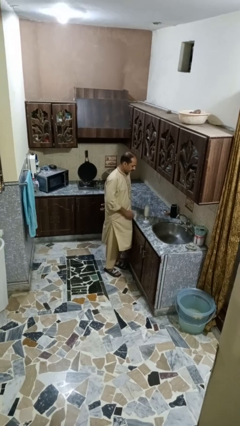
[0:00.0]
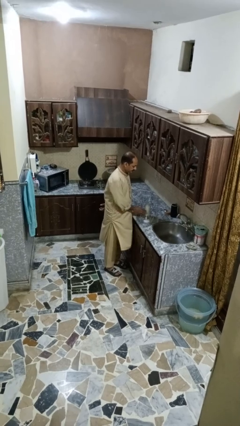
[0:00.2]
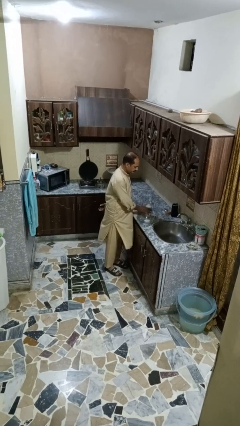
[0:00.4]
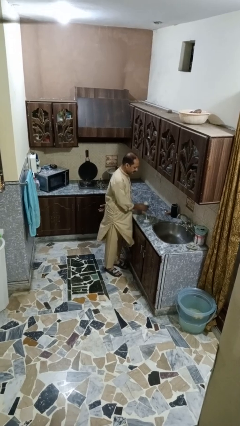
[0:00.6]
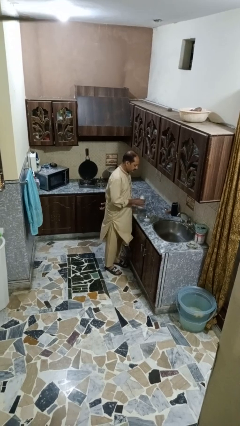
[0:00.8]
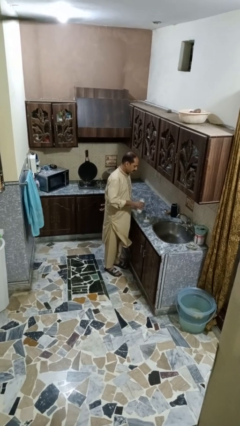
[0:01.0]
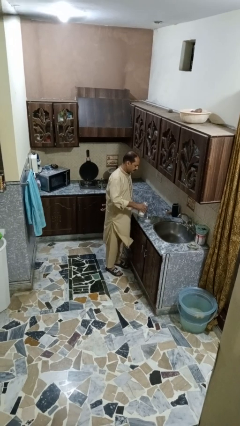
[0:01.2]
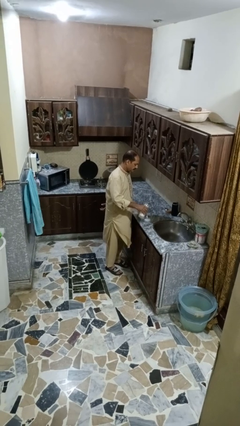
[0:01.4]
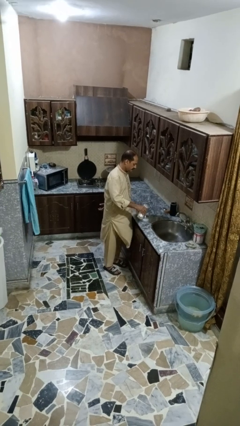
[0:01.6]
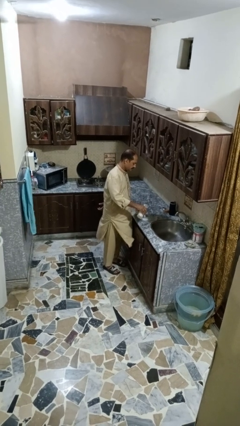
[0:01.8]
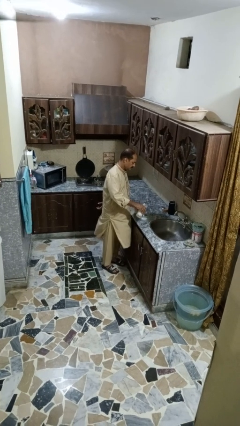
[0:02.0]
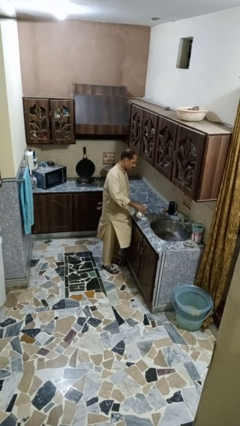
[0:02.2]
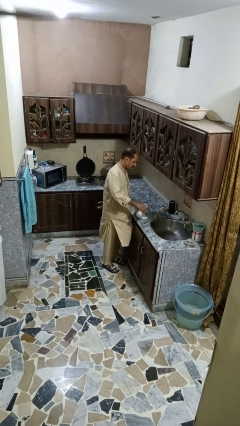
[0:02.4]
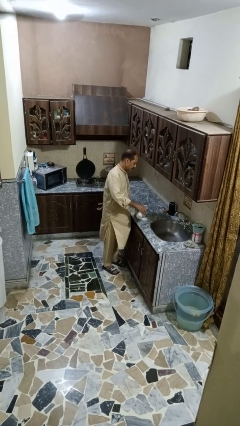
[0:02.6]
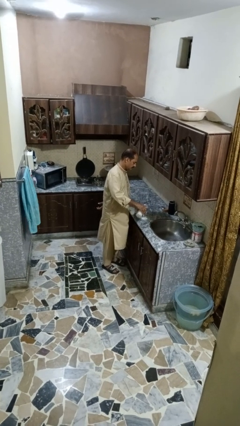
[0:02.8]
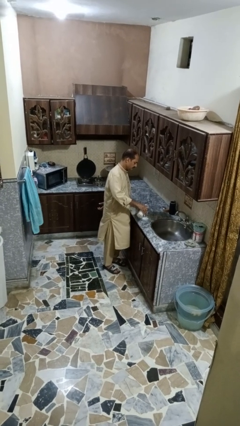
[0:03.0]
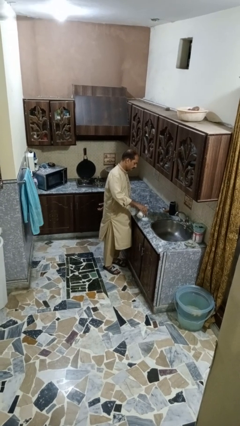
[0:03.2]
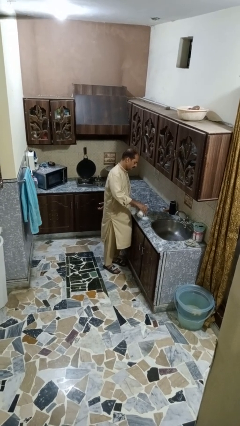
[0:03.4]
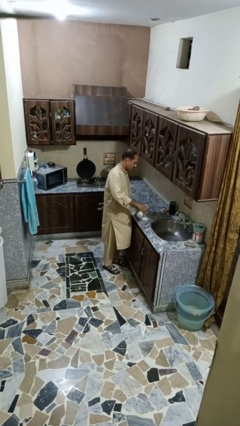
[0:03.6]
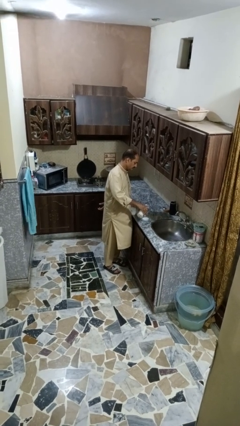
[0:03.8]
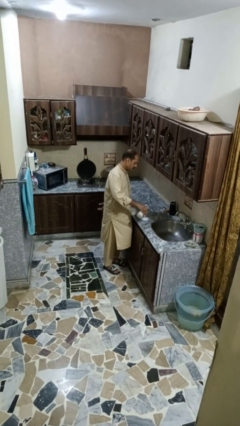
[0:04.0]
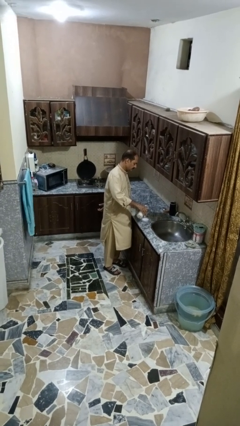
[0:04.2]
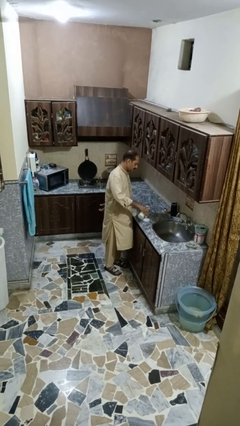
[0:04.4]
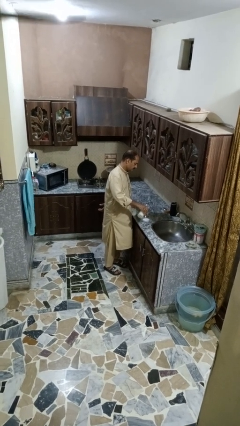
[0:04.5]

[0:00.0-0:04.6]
person pours into bowl

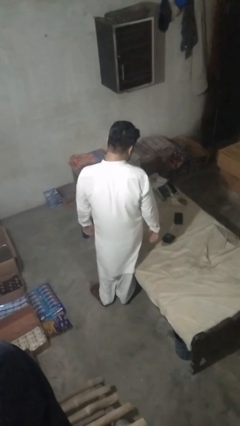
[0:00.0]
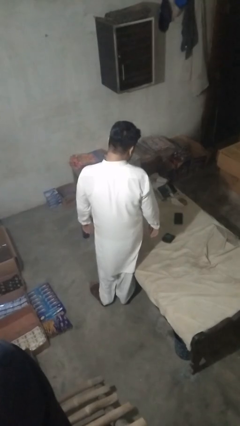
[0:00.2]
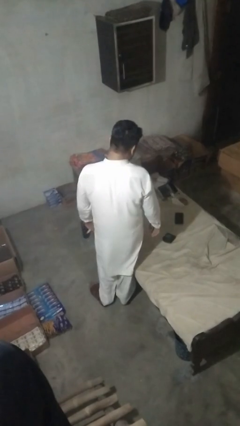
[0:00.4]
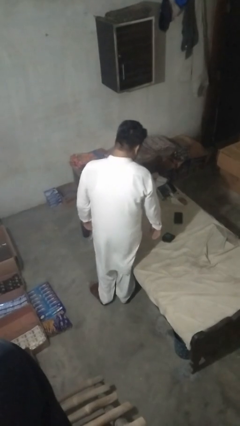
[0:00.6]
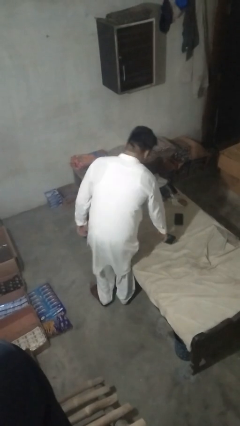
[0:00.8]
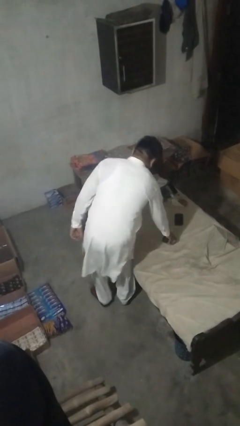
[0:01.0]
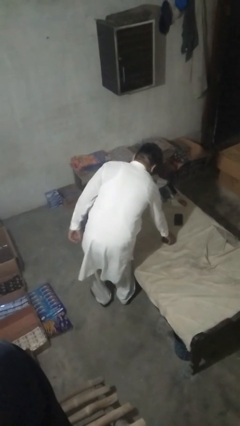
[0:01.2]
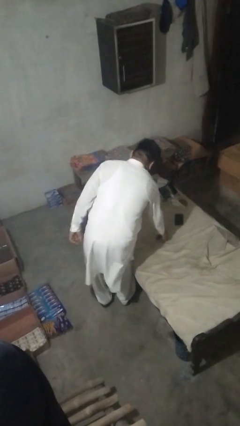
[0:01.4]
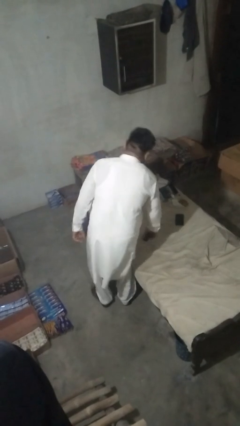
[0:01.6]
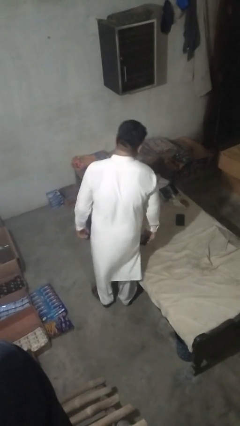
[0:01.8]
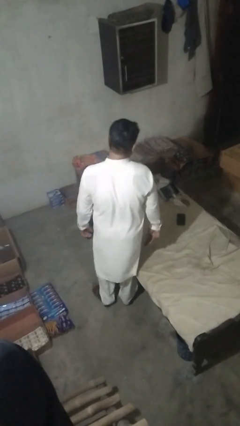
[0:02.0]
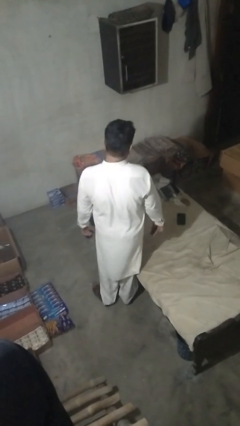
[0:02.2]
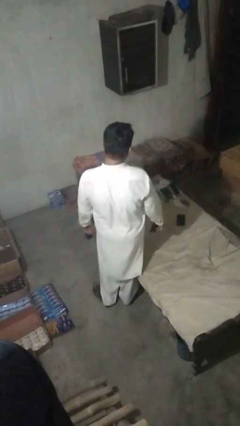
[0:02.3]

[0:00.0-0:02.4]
person picks up object from bed

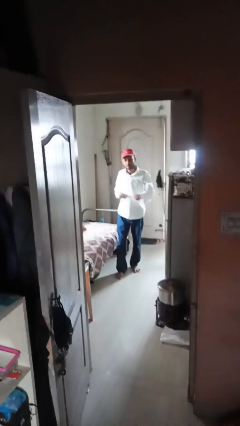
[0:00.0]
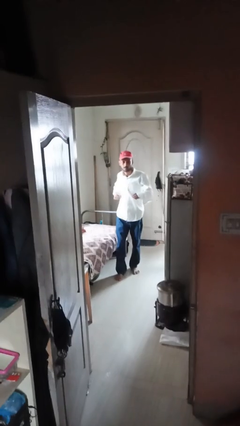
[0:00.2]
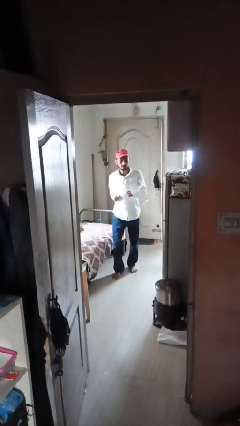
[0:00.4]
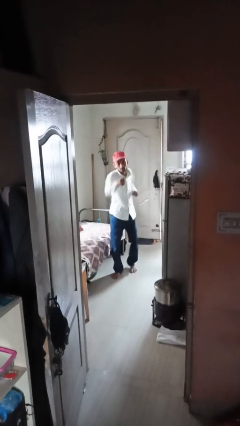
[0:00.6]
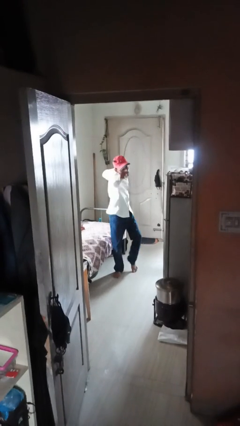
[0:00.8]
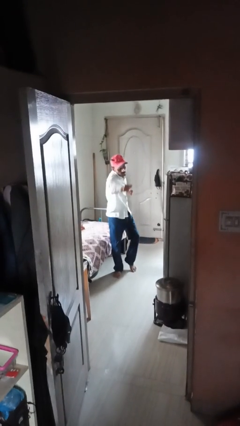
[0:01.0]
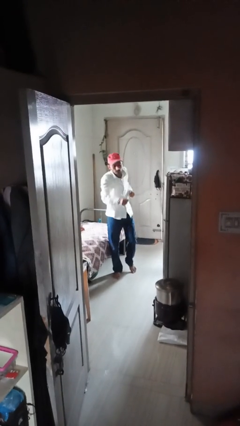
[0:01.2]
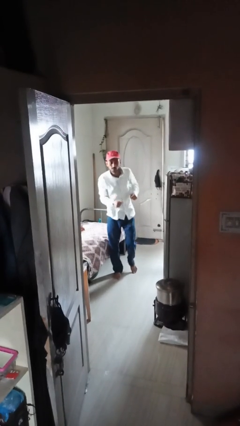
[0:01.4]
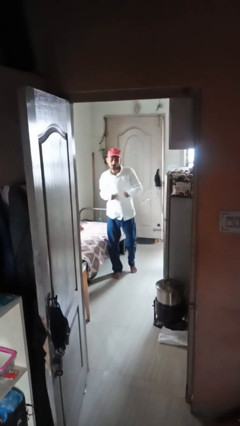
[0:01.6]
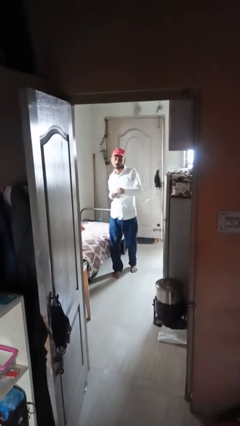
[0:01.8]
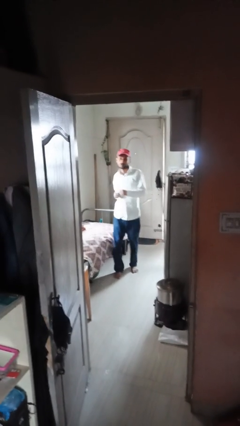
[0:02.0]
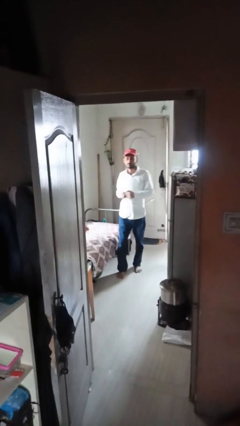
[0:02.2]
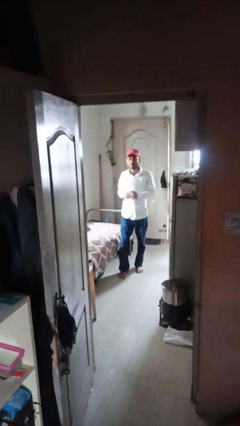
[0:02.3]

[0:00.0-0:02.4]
person punches

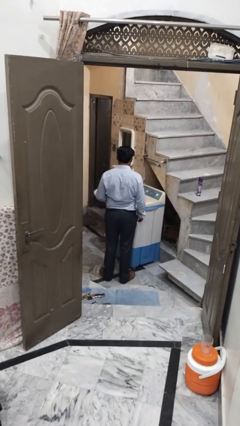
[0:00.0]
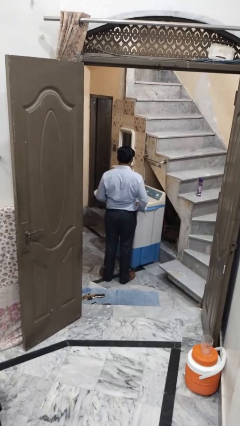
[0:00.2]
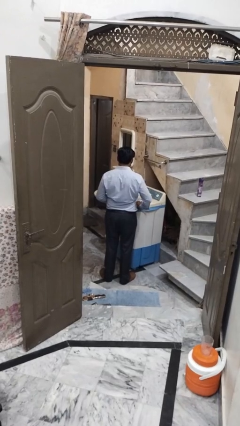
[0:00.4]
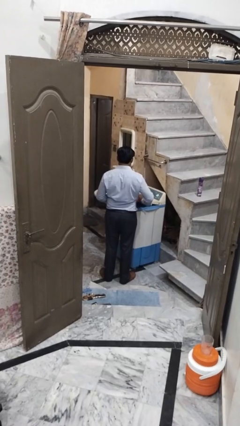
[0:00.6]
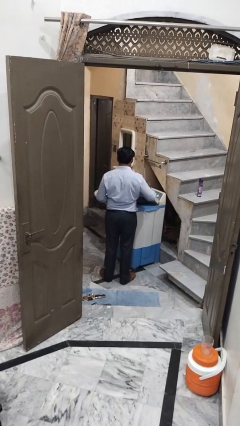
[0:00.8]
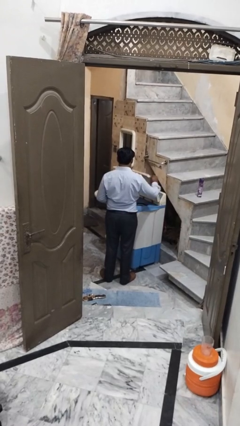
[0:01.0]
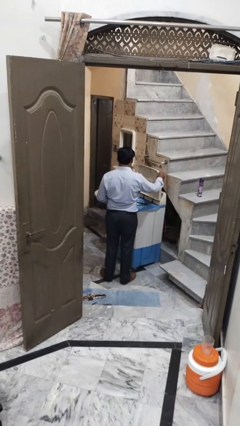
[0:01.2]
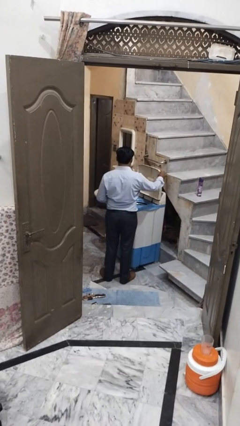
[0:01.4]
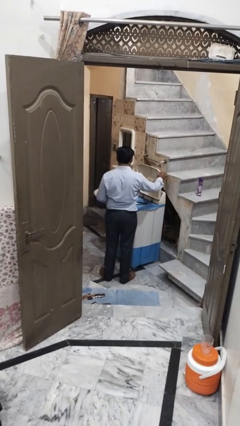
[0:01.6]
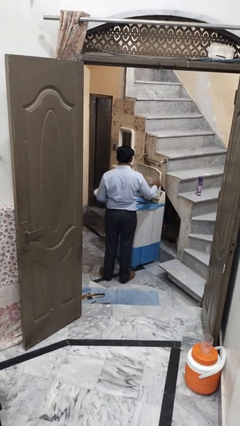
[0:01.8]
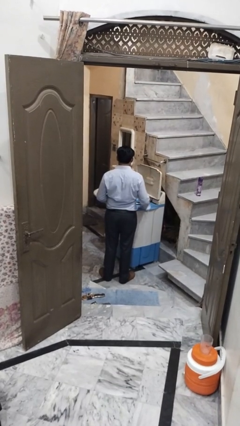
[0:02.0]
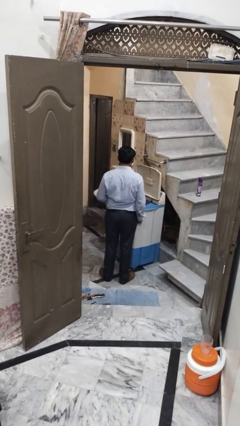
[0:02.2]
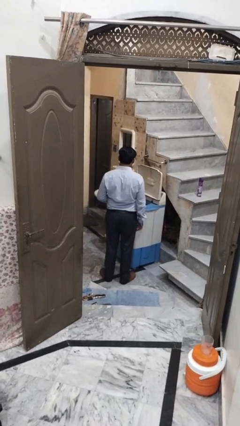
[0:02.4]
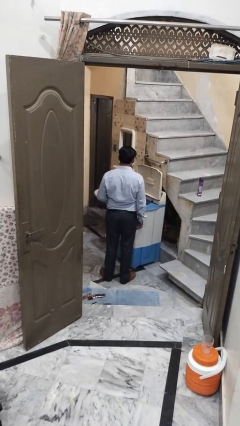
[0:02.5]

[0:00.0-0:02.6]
person opens clothes washer

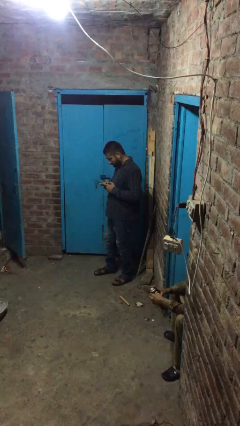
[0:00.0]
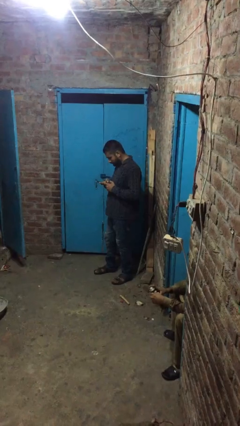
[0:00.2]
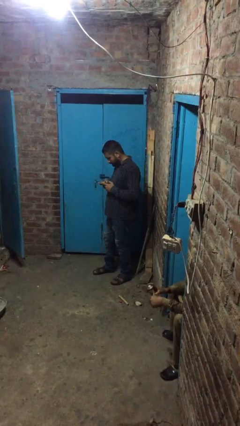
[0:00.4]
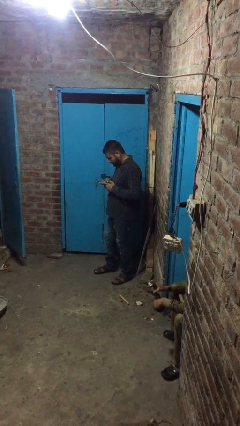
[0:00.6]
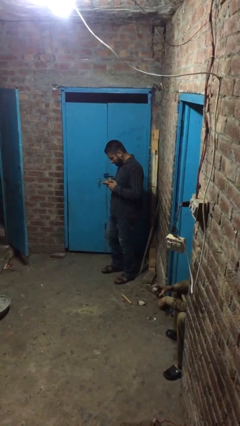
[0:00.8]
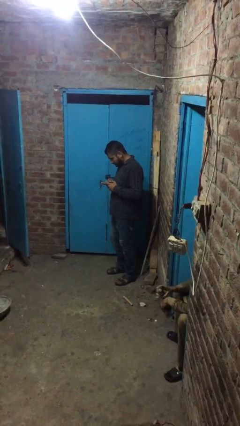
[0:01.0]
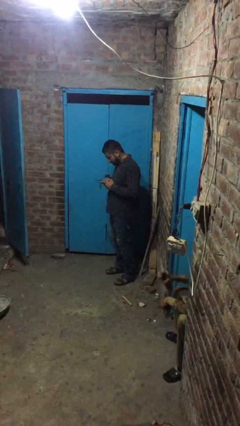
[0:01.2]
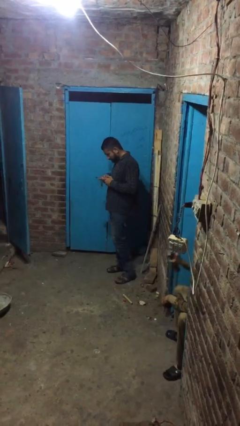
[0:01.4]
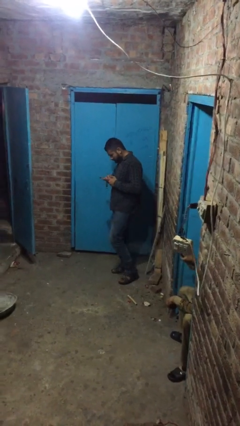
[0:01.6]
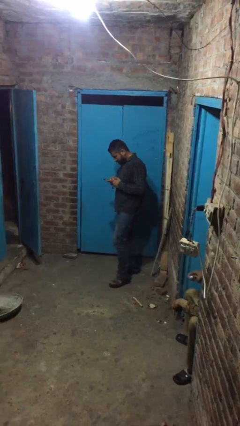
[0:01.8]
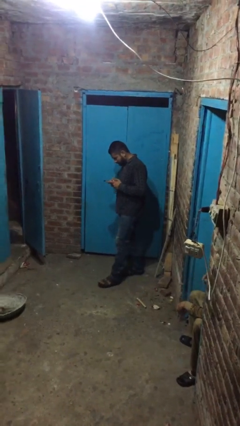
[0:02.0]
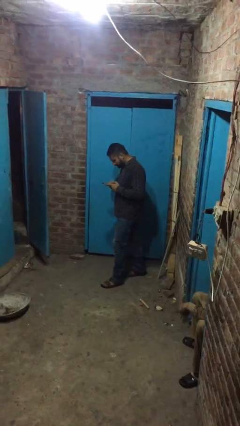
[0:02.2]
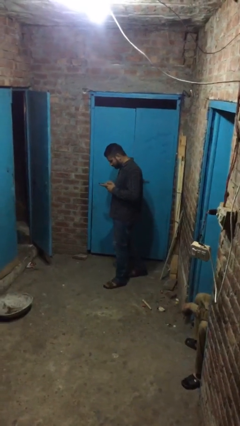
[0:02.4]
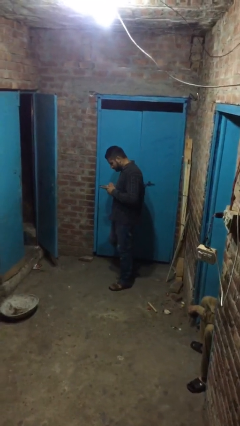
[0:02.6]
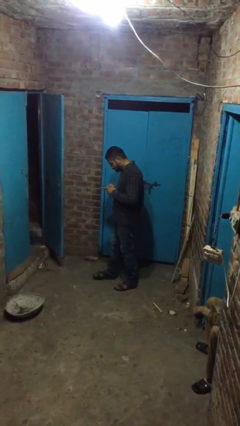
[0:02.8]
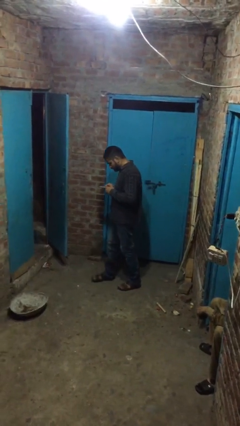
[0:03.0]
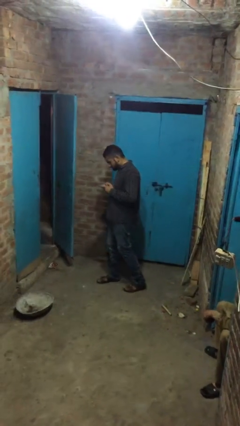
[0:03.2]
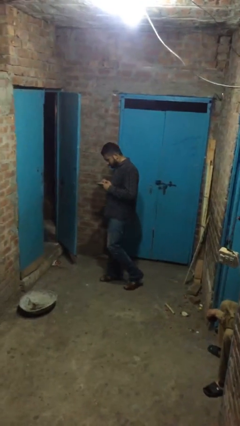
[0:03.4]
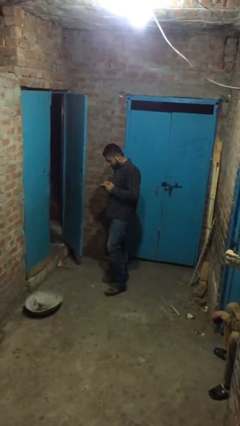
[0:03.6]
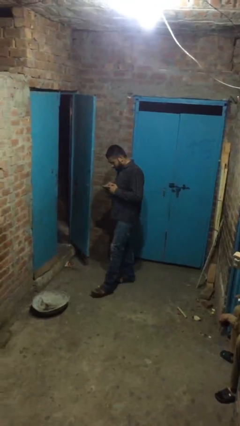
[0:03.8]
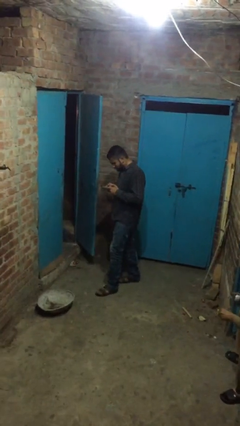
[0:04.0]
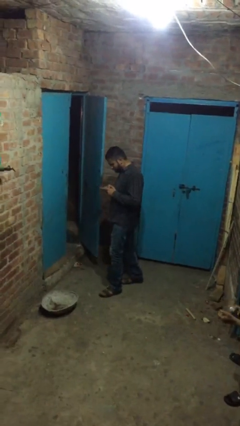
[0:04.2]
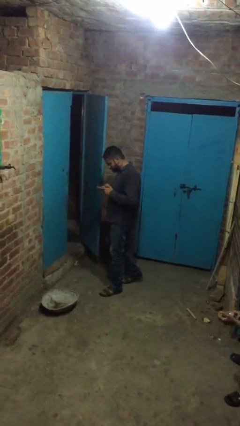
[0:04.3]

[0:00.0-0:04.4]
person texts on phone

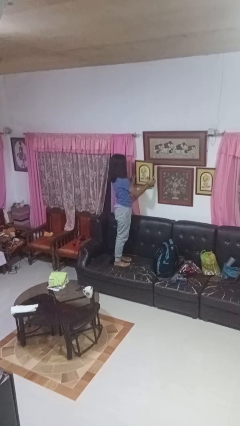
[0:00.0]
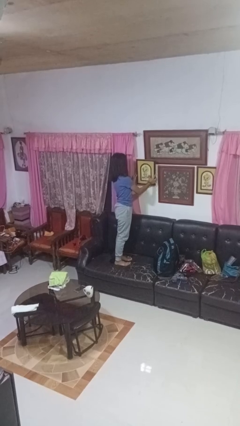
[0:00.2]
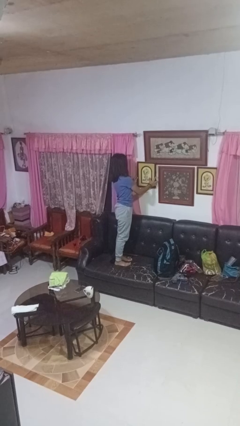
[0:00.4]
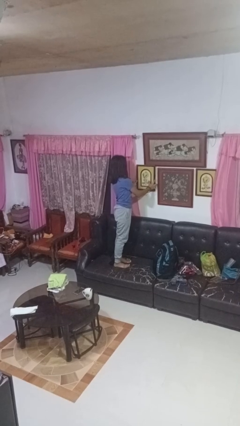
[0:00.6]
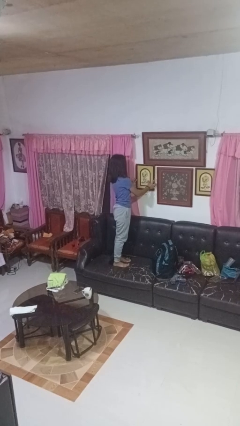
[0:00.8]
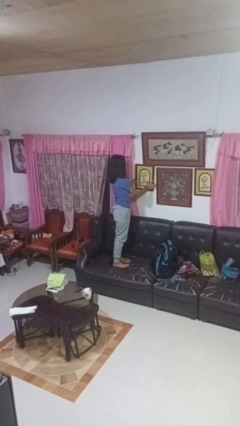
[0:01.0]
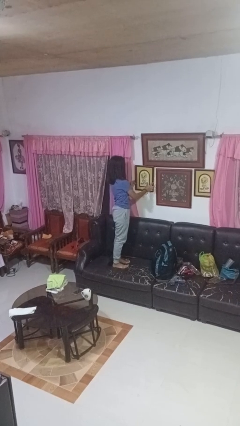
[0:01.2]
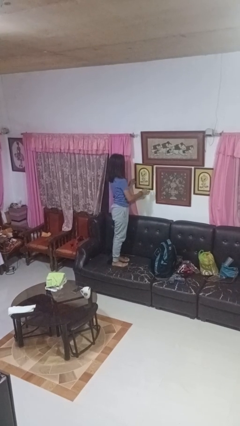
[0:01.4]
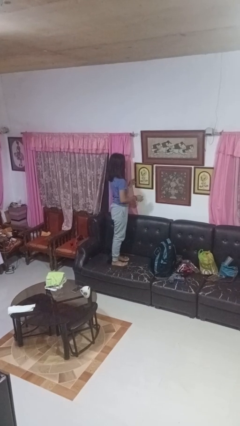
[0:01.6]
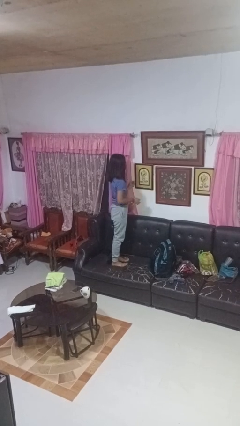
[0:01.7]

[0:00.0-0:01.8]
person puts up picture frame
